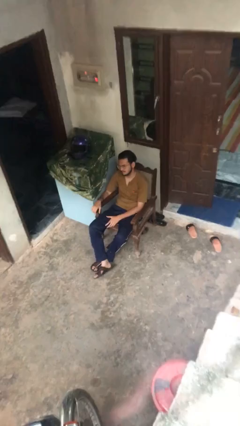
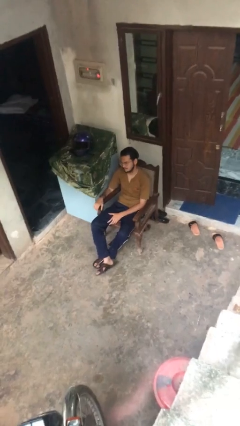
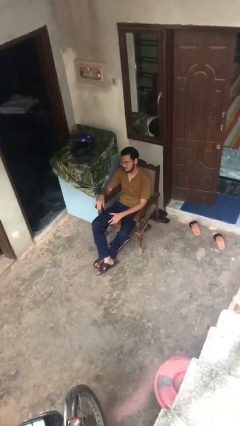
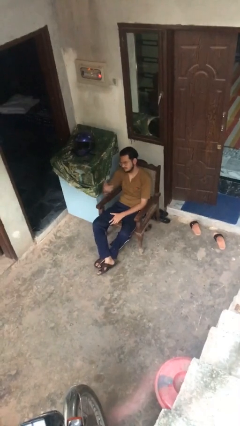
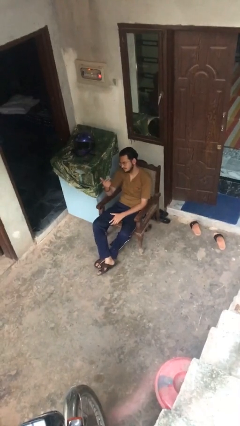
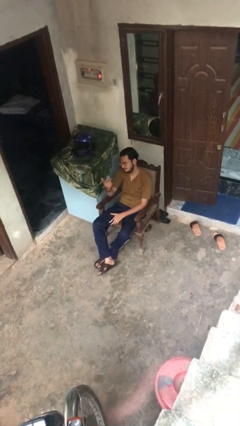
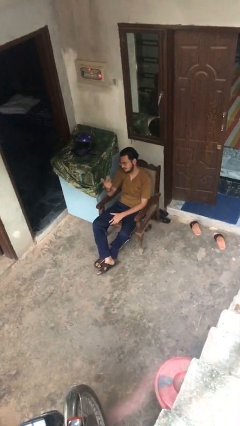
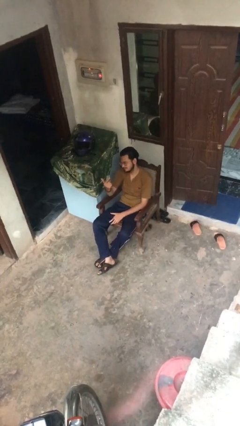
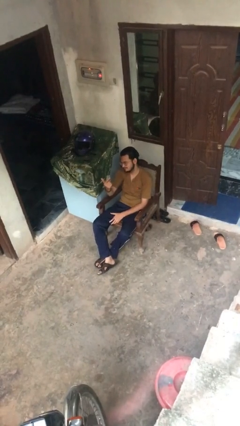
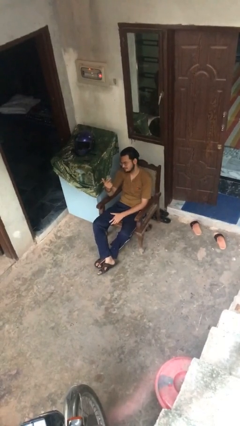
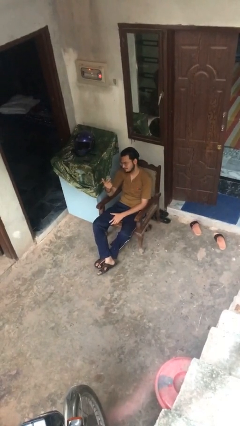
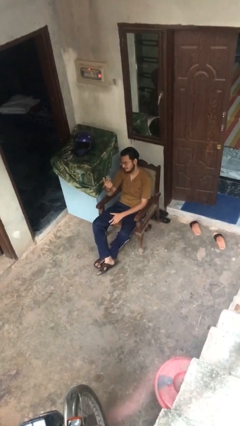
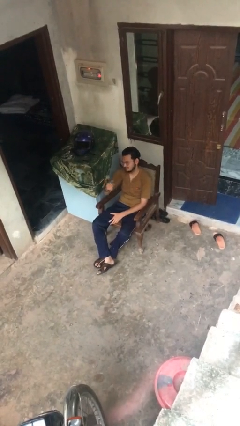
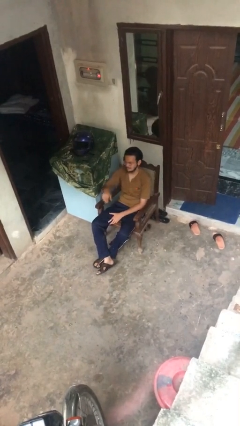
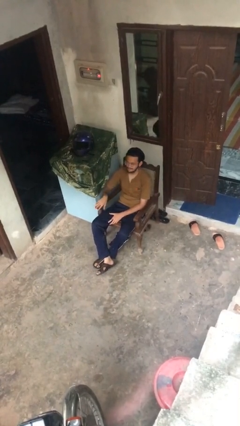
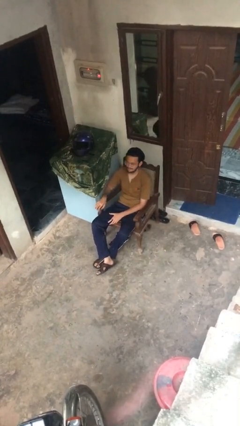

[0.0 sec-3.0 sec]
person gestures come here

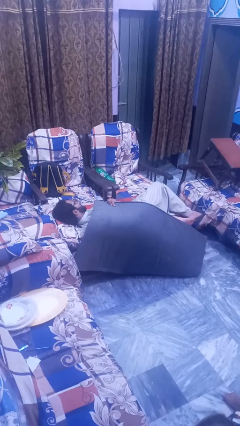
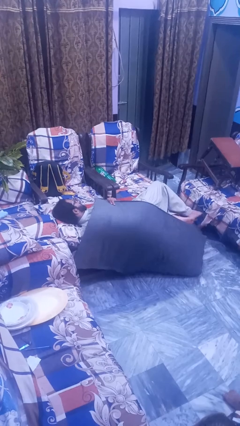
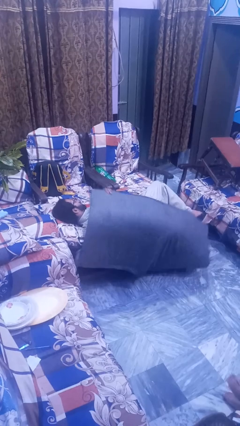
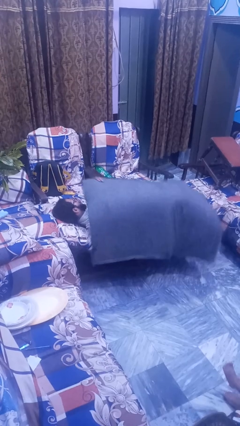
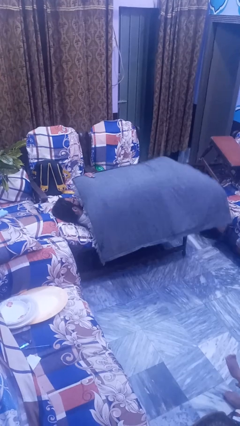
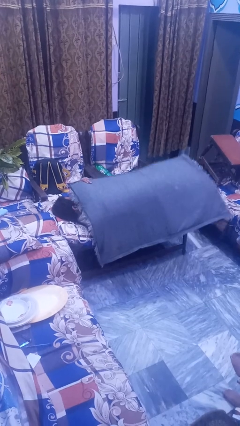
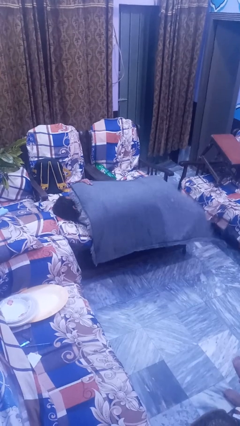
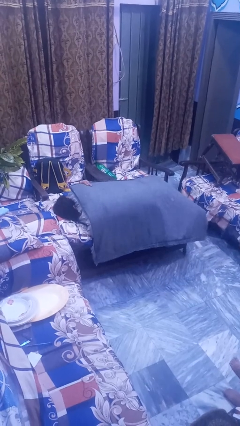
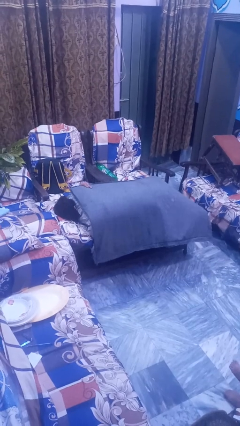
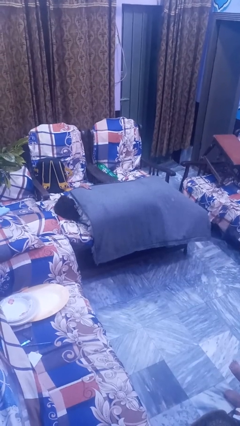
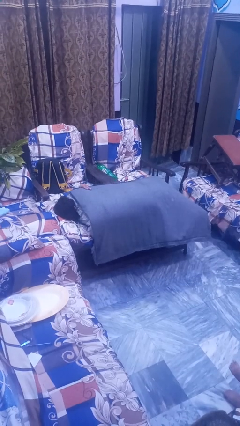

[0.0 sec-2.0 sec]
person covers with blanket

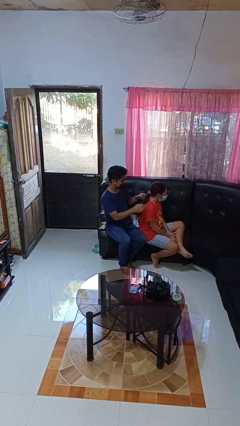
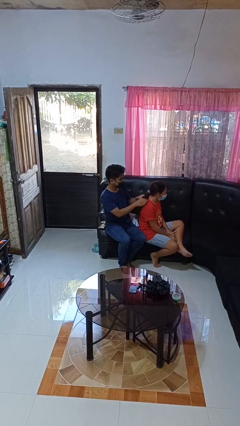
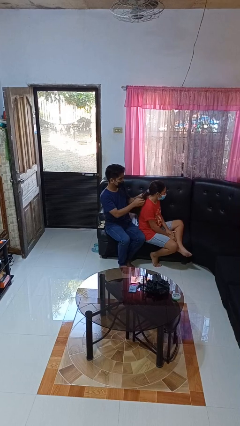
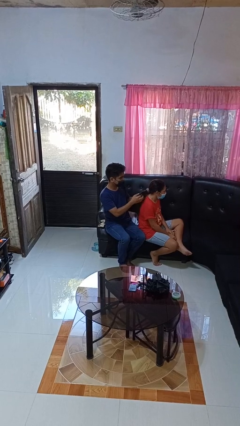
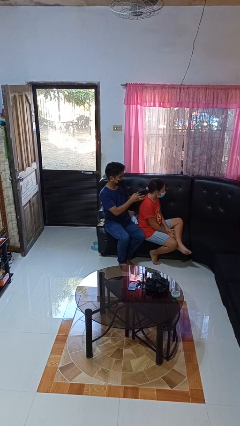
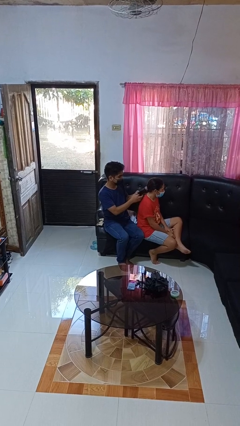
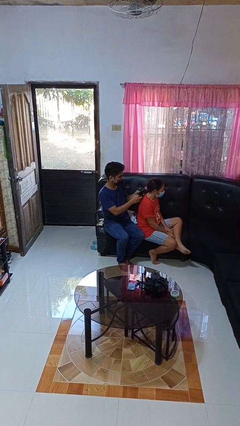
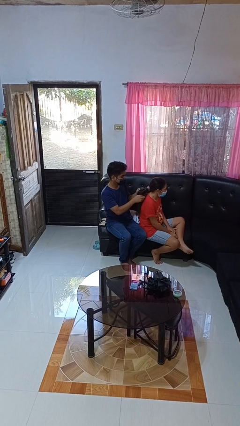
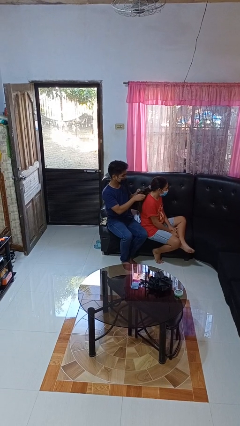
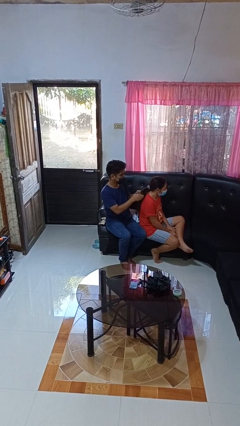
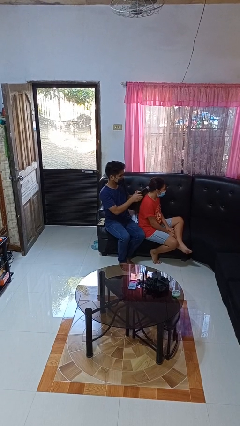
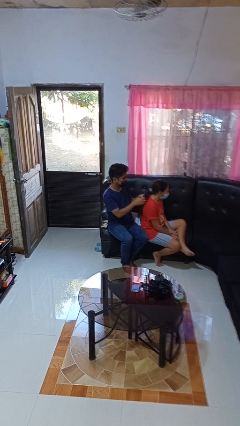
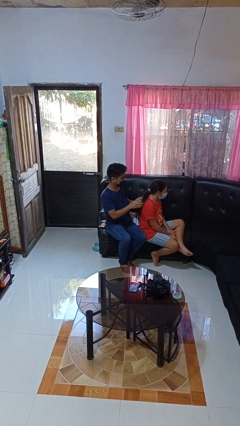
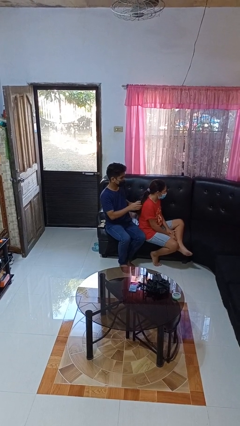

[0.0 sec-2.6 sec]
person braids hair of person

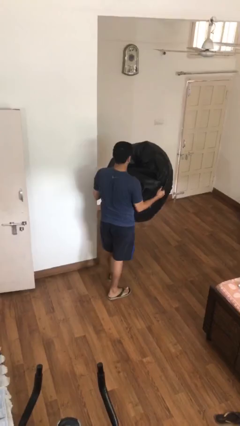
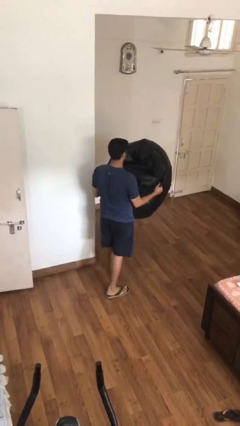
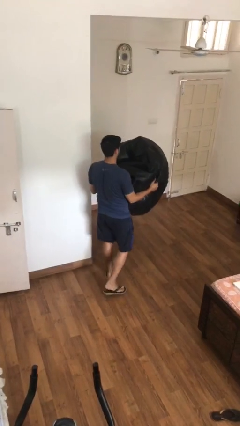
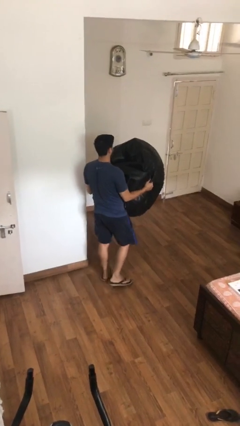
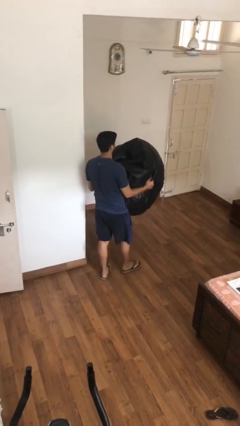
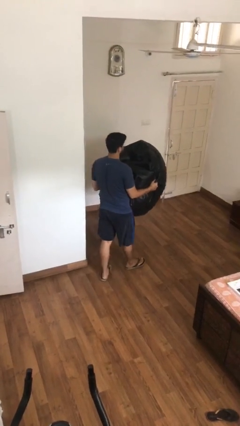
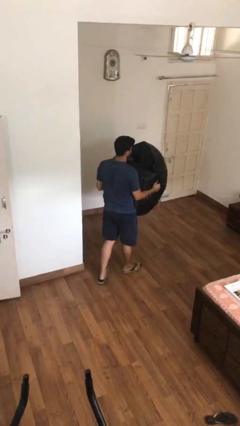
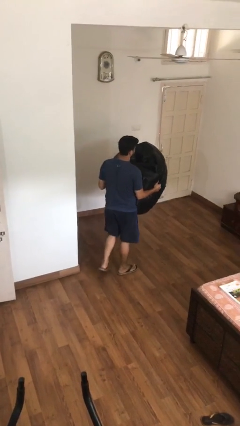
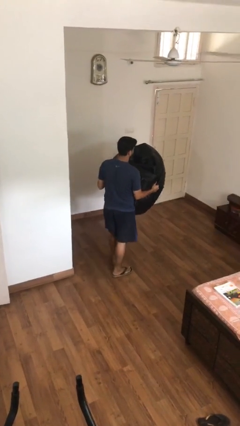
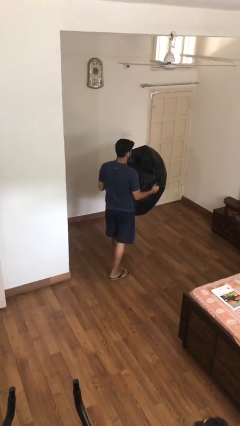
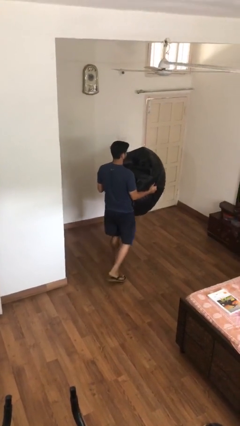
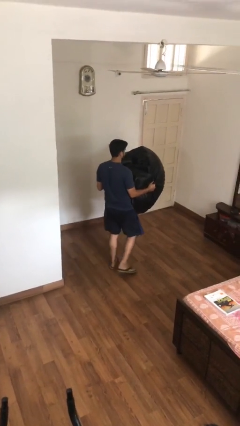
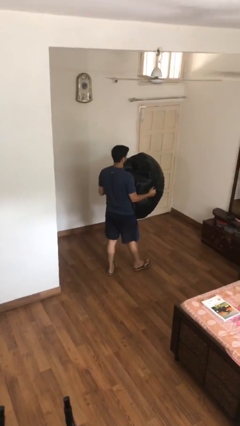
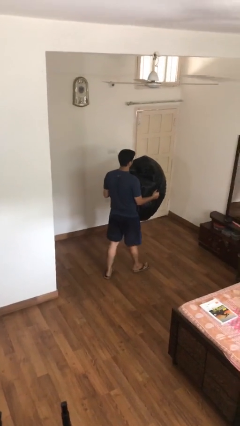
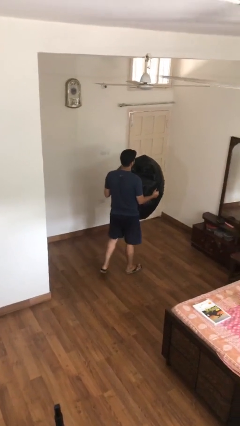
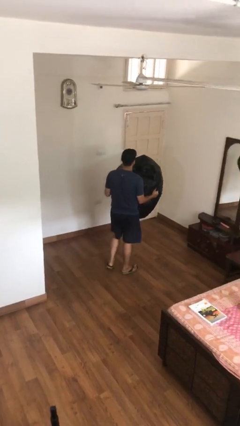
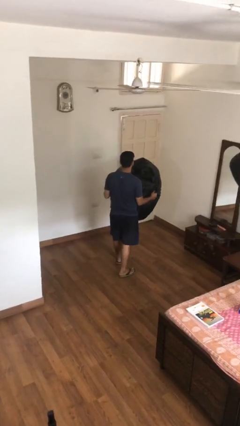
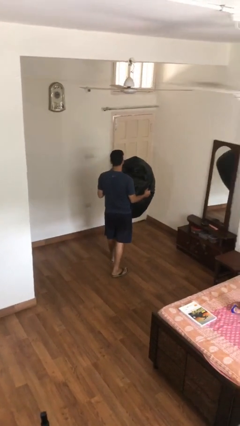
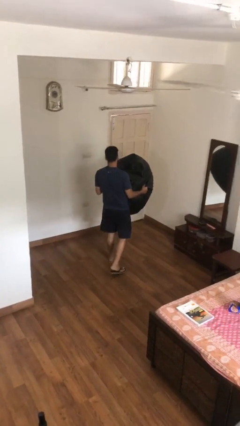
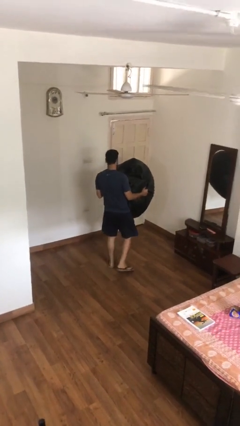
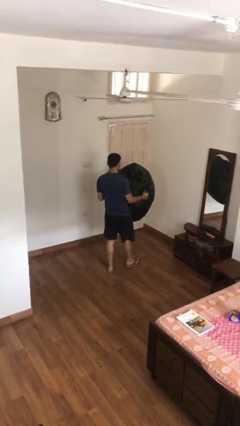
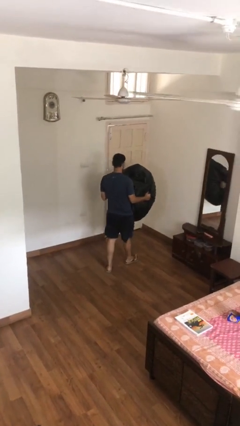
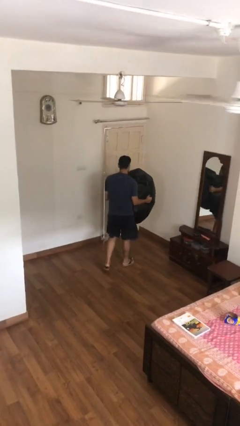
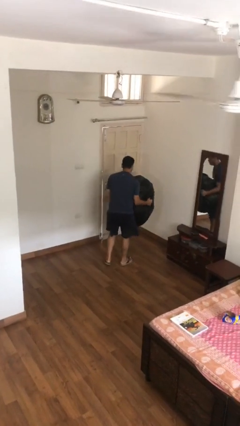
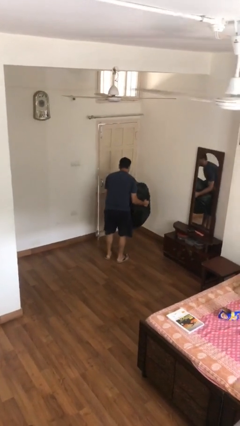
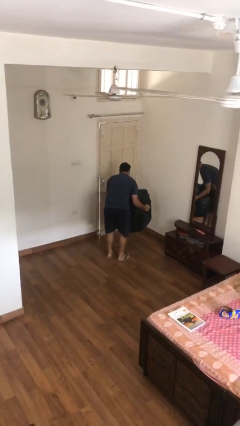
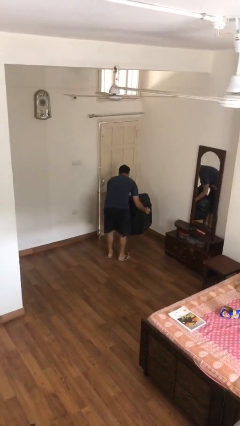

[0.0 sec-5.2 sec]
person carries heavy object

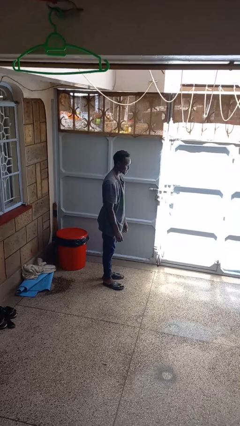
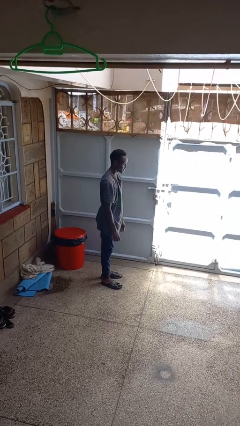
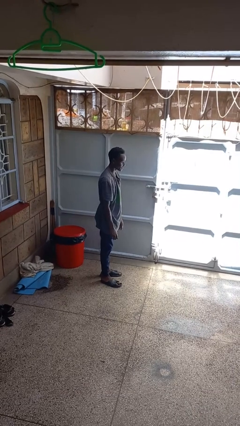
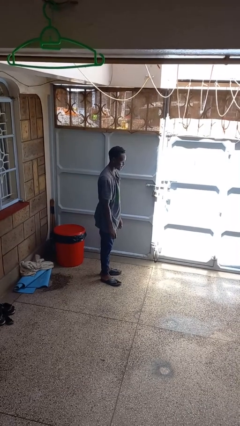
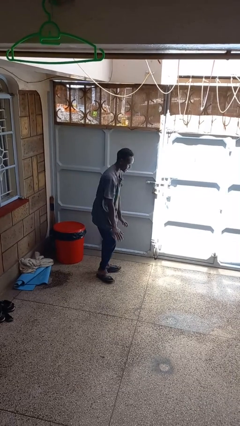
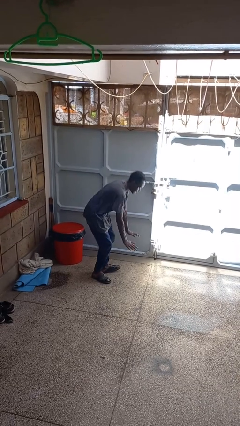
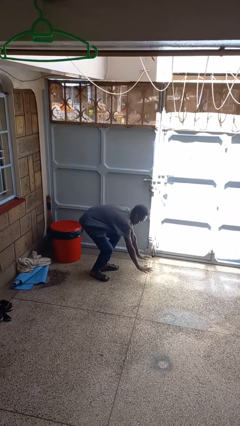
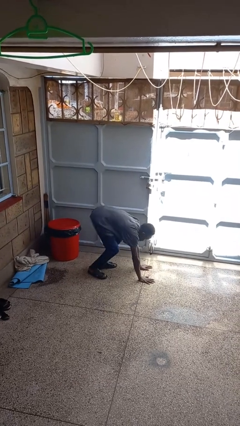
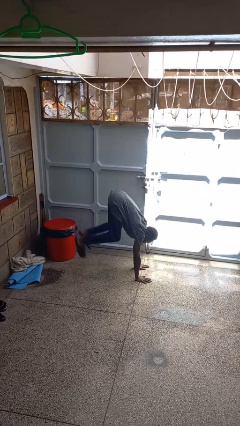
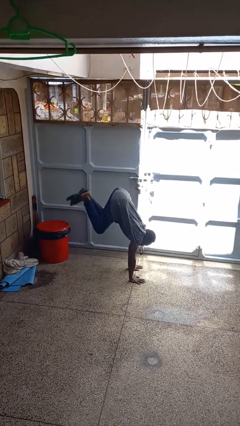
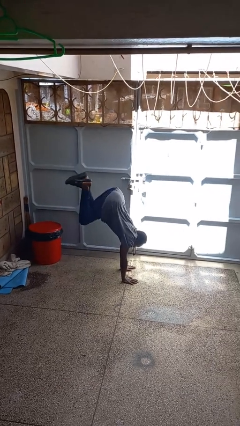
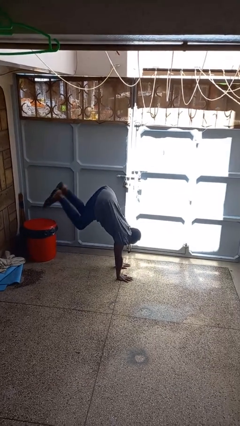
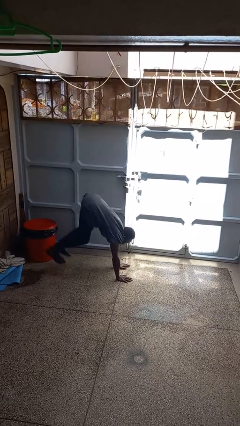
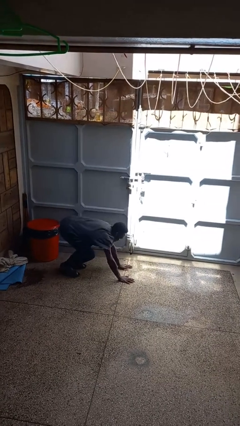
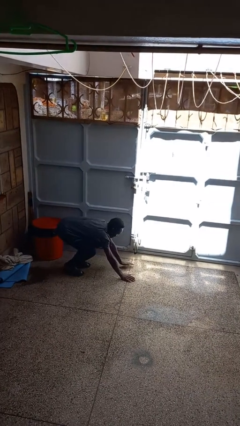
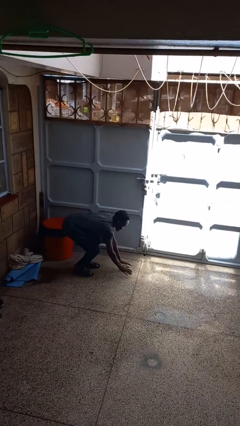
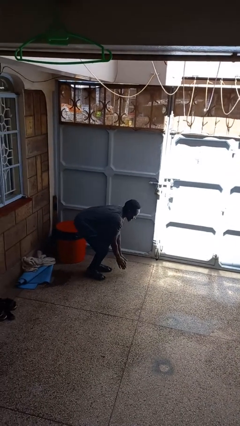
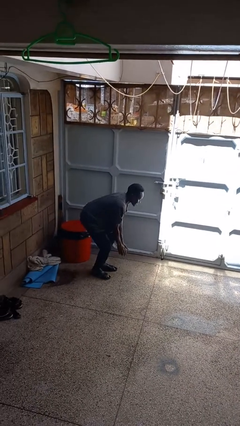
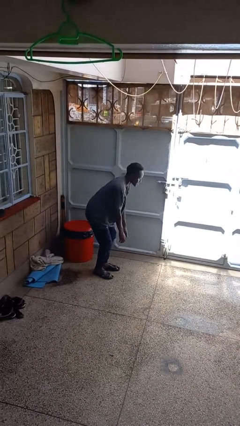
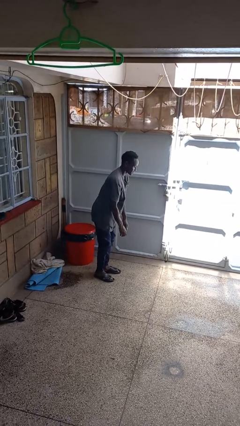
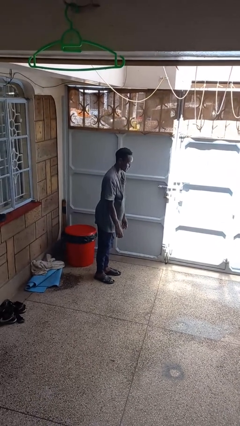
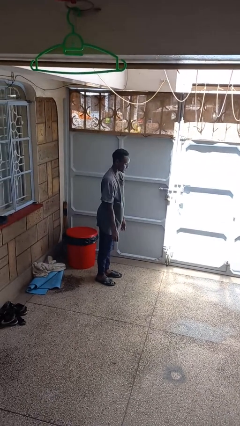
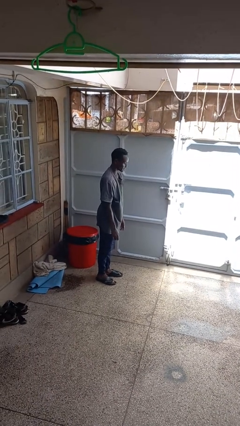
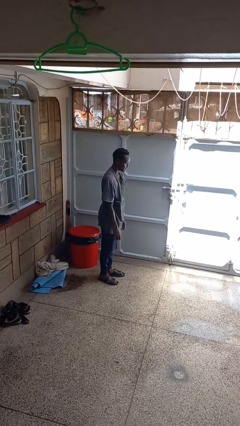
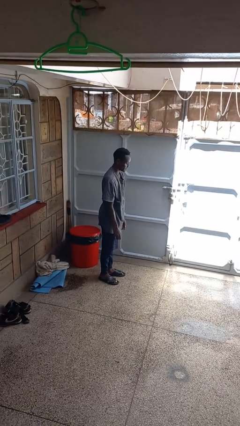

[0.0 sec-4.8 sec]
person handstand
